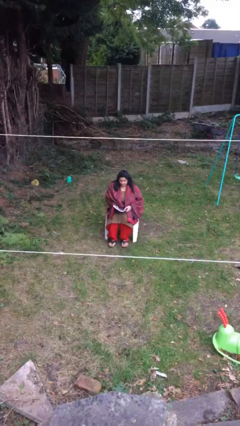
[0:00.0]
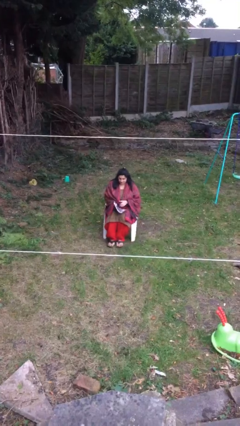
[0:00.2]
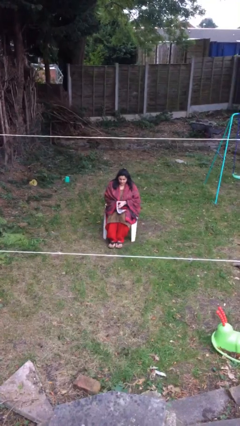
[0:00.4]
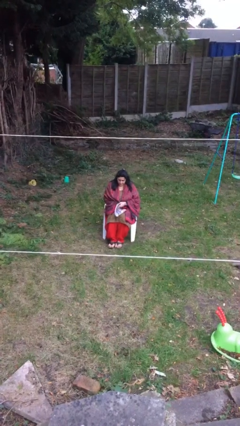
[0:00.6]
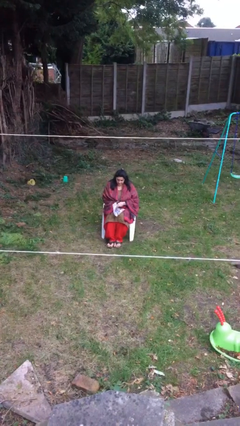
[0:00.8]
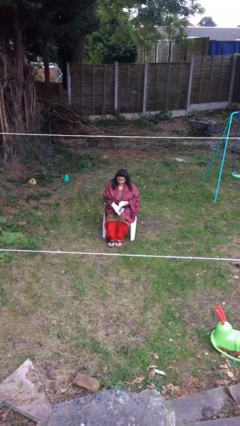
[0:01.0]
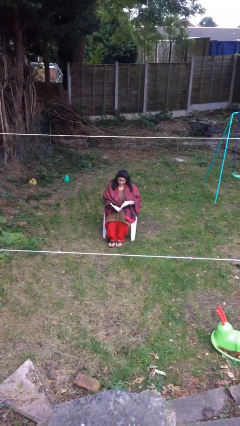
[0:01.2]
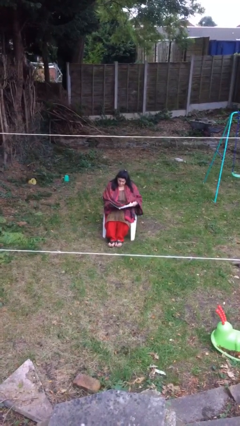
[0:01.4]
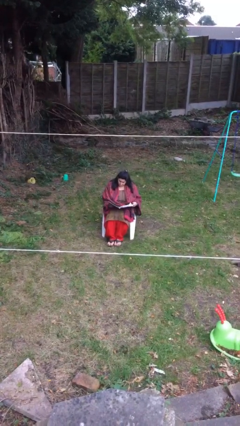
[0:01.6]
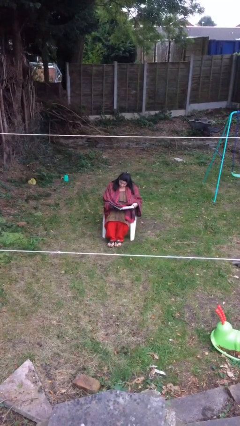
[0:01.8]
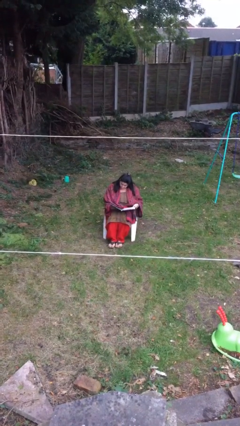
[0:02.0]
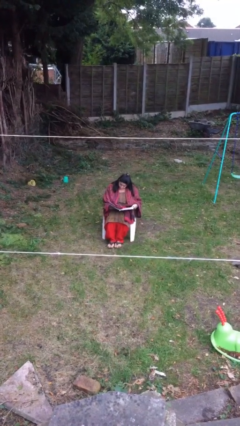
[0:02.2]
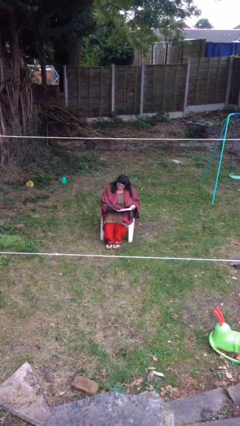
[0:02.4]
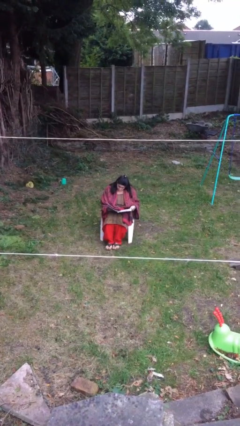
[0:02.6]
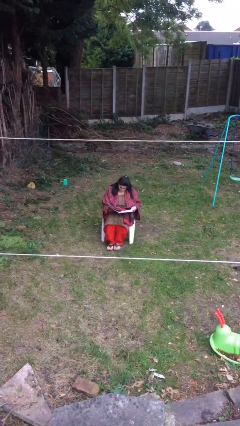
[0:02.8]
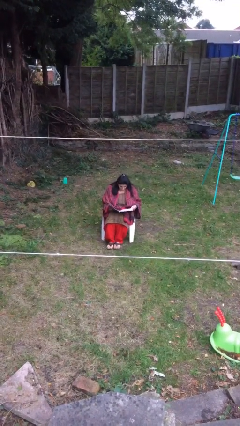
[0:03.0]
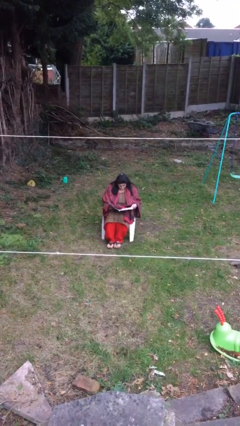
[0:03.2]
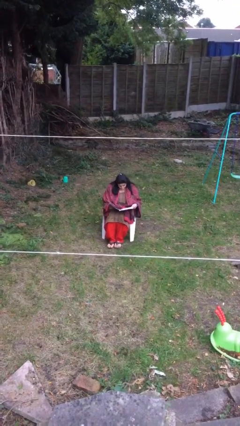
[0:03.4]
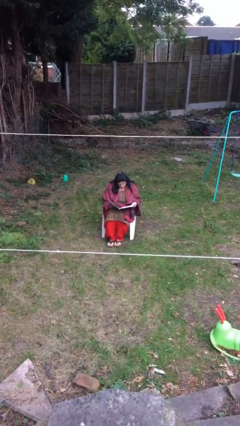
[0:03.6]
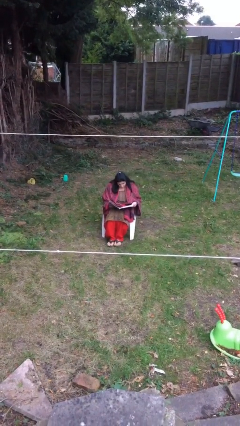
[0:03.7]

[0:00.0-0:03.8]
person reads document

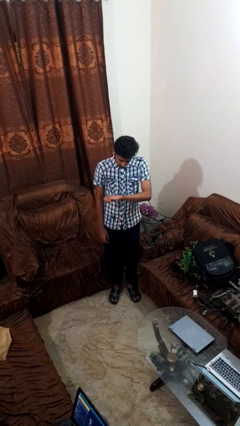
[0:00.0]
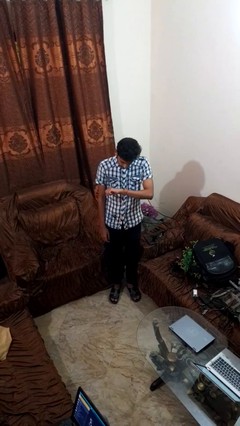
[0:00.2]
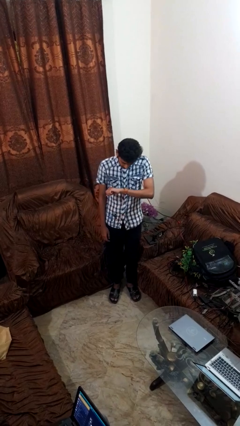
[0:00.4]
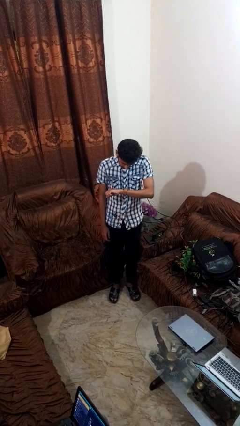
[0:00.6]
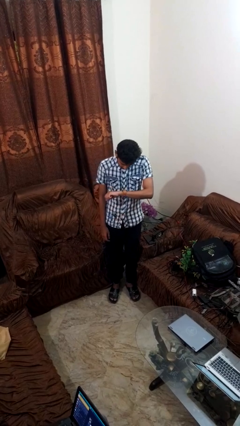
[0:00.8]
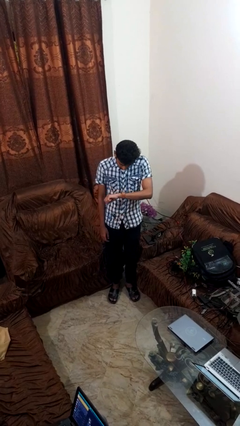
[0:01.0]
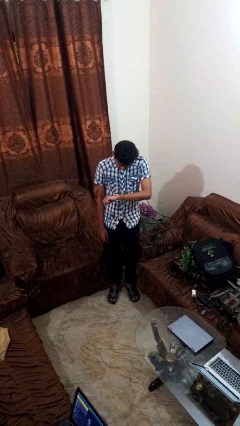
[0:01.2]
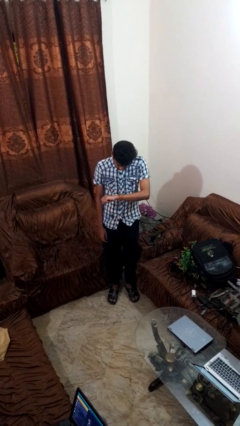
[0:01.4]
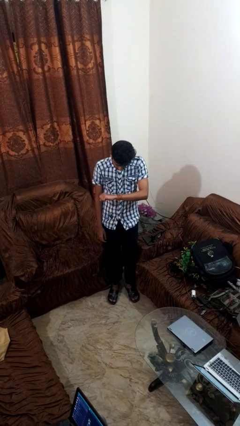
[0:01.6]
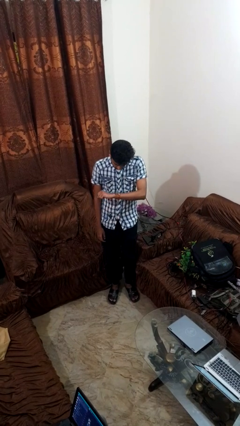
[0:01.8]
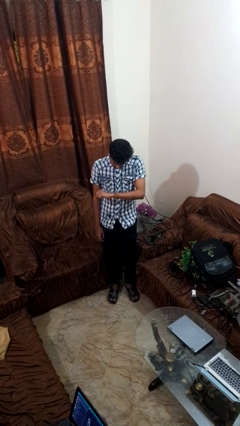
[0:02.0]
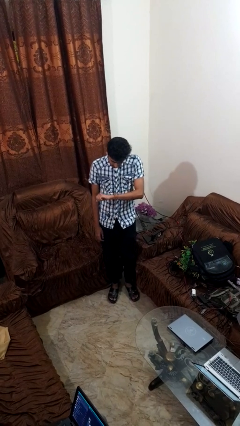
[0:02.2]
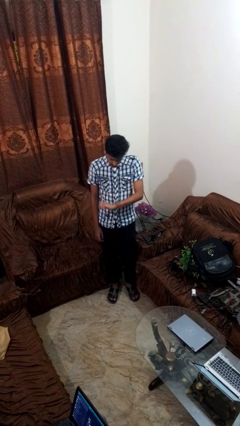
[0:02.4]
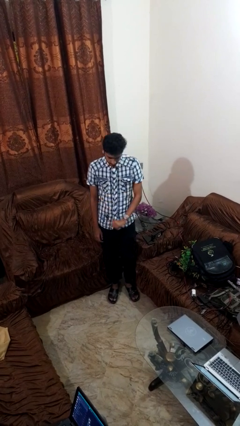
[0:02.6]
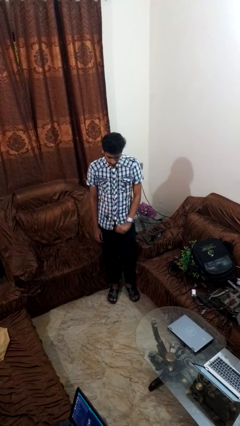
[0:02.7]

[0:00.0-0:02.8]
person looks at wristwatch

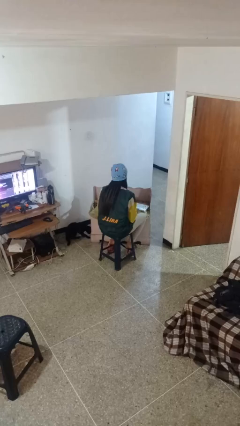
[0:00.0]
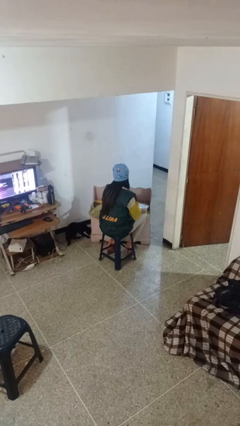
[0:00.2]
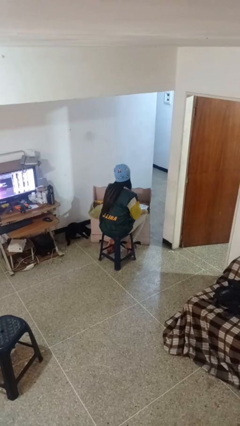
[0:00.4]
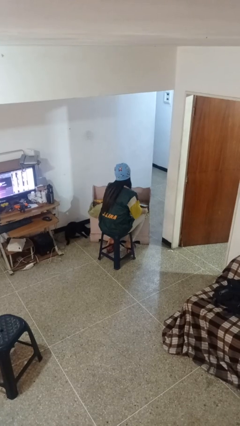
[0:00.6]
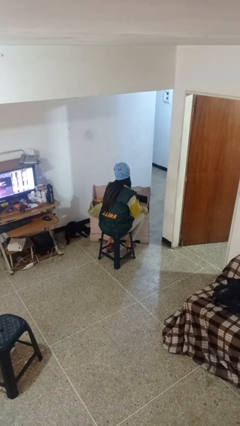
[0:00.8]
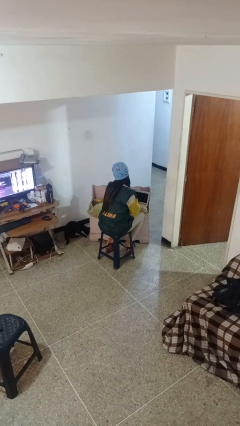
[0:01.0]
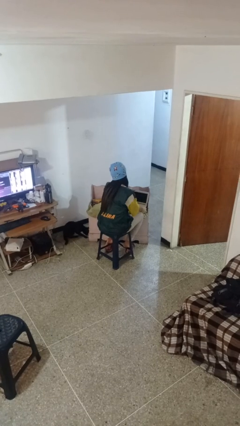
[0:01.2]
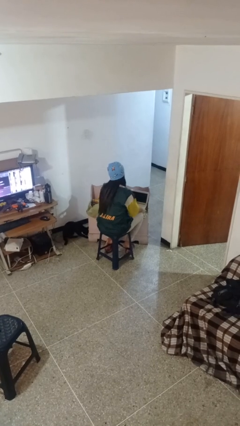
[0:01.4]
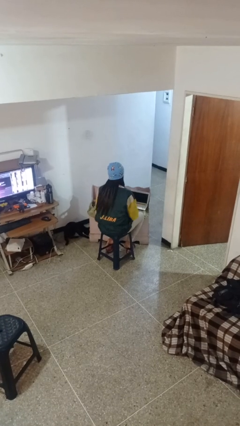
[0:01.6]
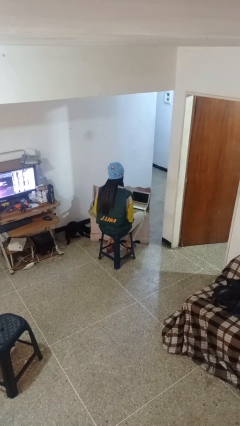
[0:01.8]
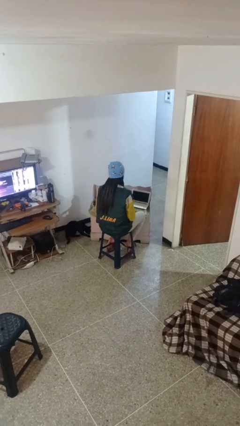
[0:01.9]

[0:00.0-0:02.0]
person opens laptop

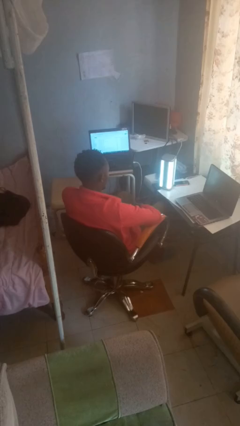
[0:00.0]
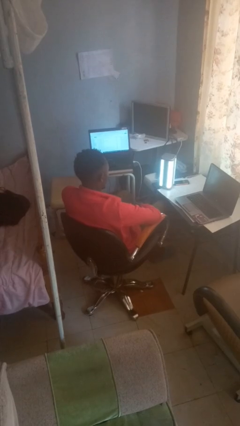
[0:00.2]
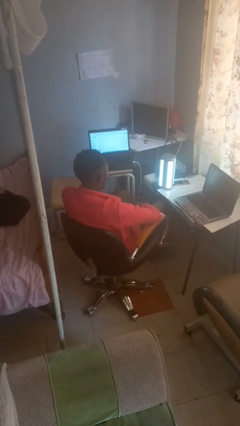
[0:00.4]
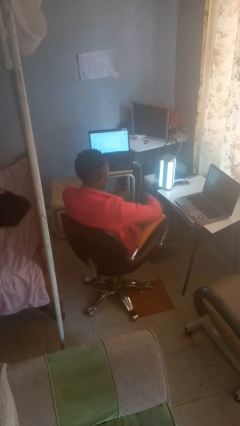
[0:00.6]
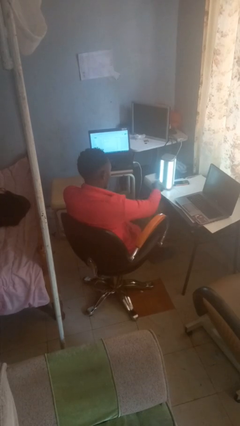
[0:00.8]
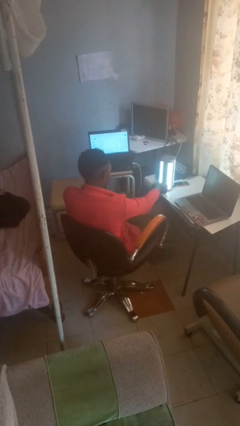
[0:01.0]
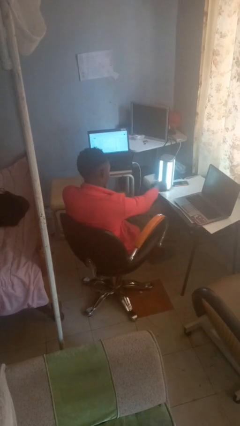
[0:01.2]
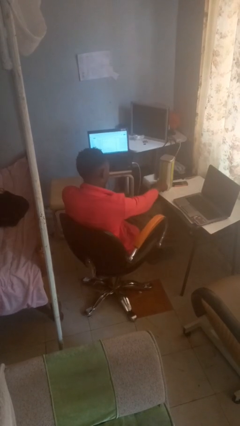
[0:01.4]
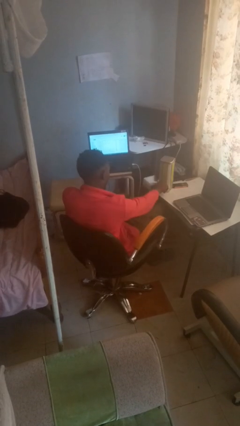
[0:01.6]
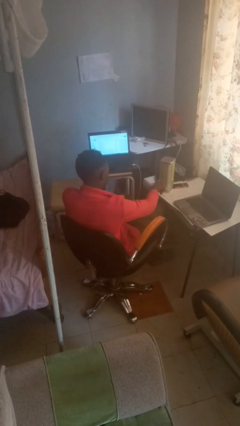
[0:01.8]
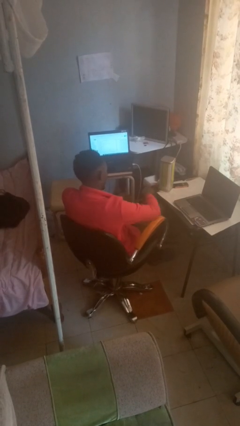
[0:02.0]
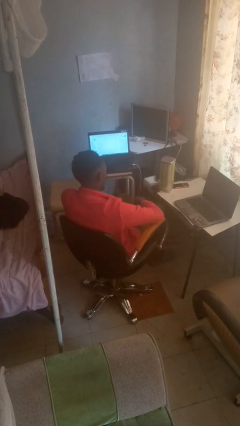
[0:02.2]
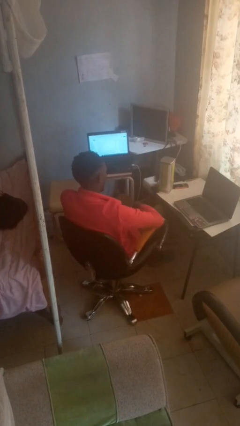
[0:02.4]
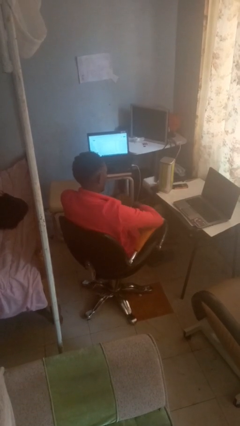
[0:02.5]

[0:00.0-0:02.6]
person turns off lamp

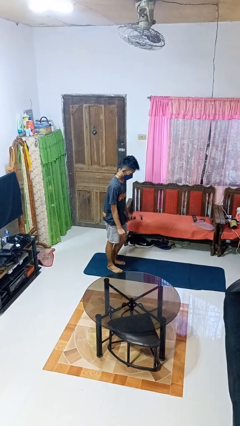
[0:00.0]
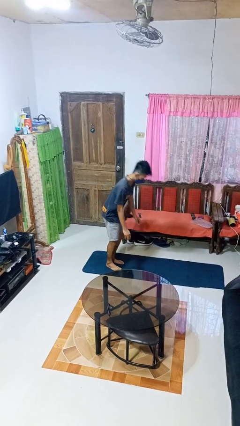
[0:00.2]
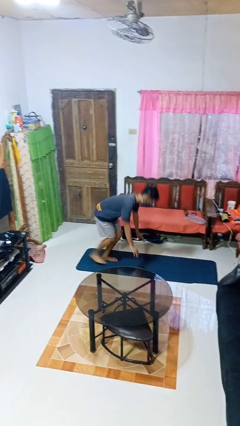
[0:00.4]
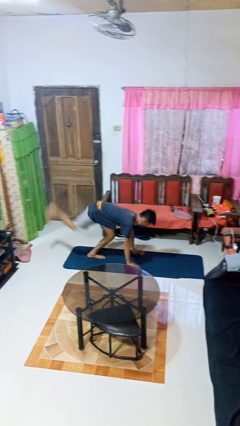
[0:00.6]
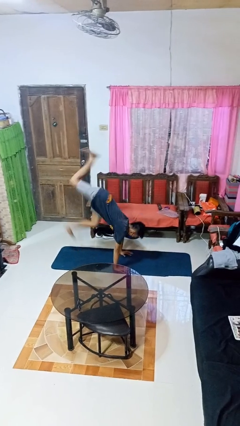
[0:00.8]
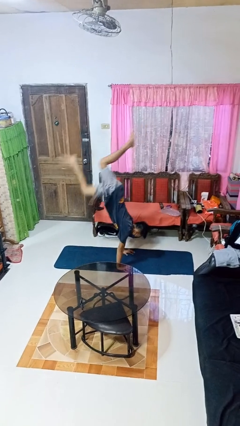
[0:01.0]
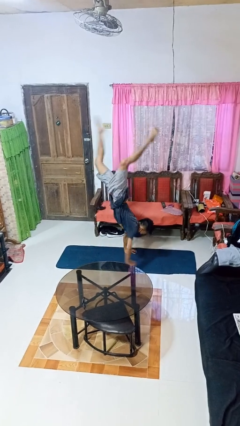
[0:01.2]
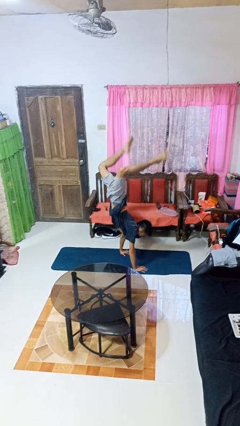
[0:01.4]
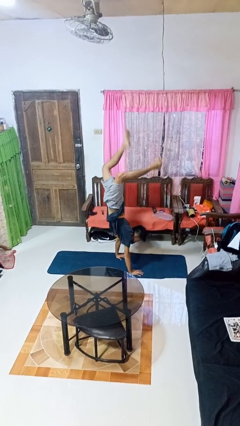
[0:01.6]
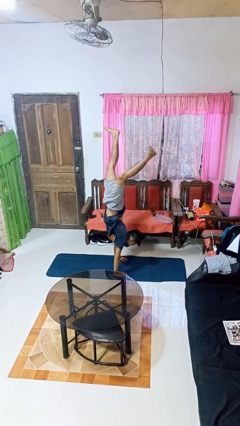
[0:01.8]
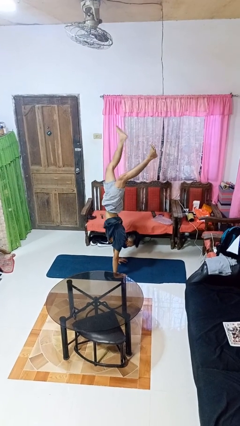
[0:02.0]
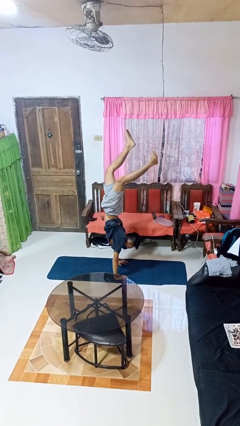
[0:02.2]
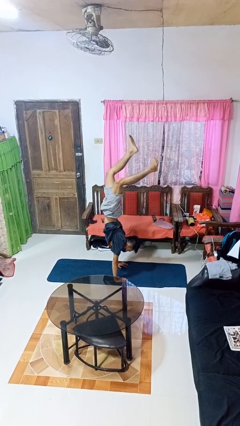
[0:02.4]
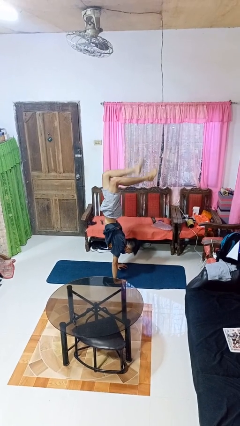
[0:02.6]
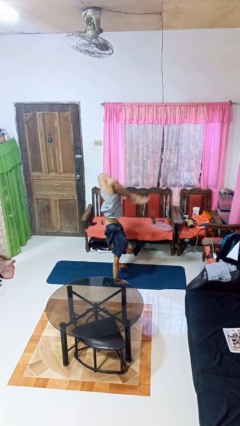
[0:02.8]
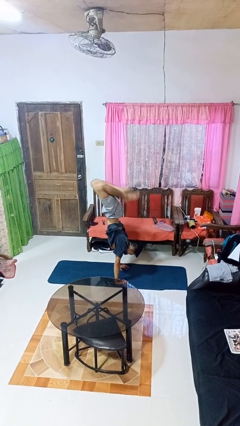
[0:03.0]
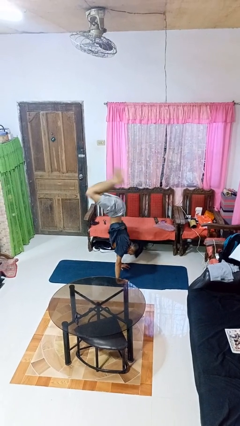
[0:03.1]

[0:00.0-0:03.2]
person handstand

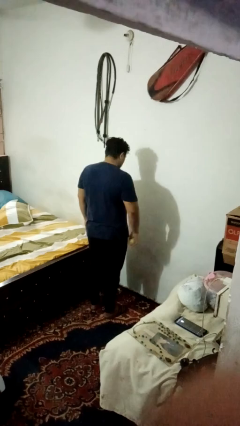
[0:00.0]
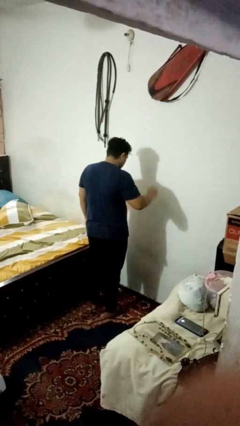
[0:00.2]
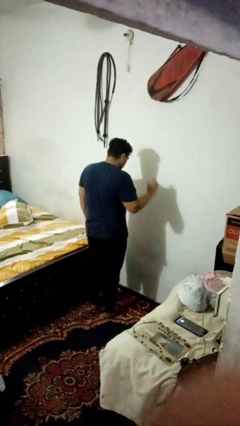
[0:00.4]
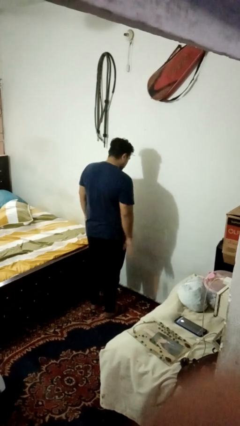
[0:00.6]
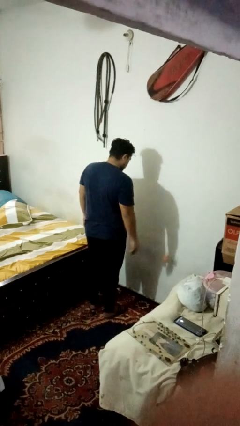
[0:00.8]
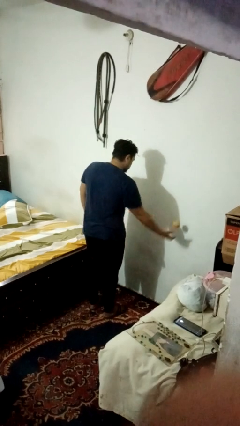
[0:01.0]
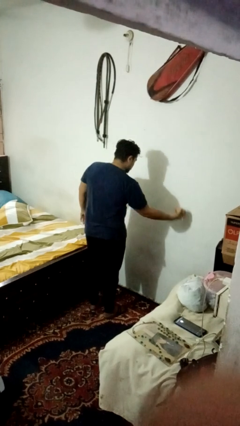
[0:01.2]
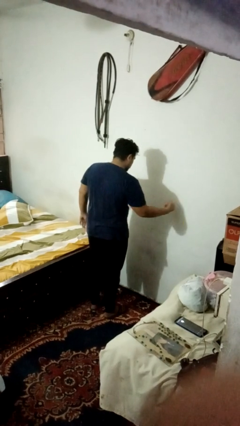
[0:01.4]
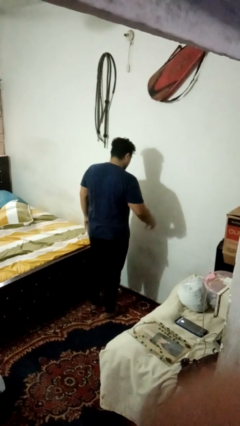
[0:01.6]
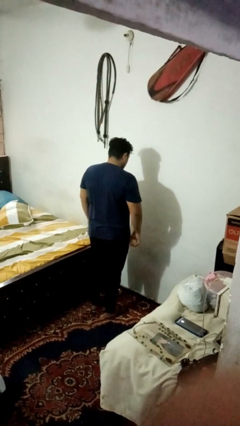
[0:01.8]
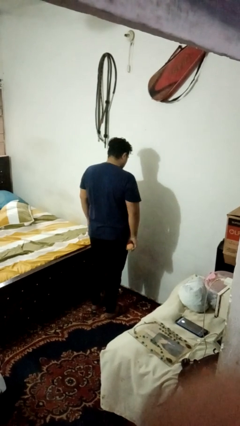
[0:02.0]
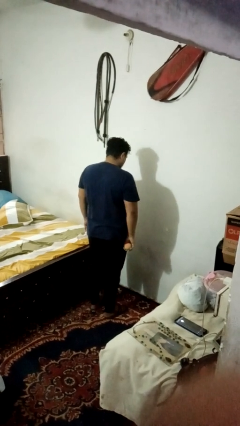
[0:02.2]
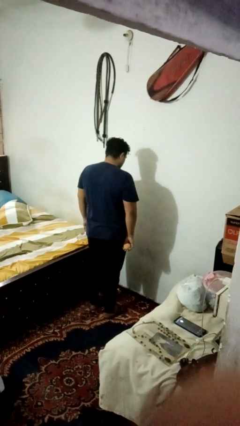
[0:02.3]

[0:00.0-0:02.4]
person bounces ball on floor

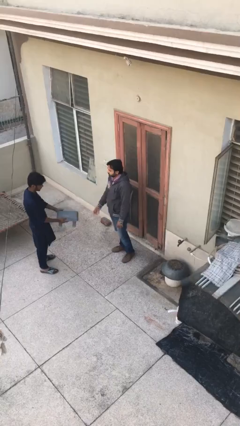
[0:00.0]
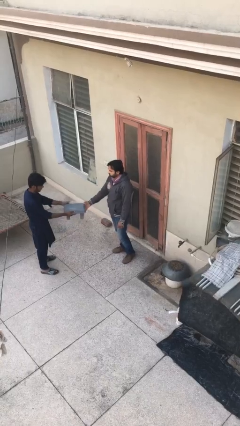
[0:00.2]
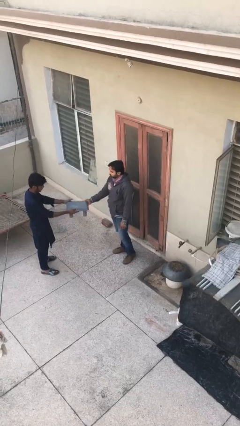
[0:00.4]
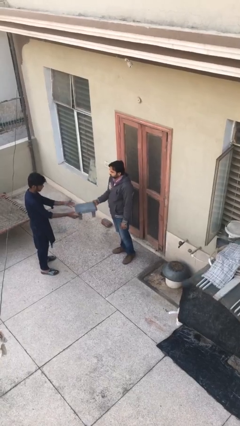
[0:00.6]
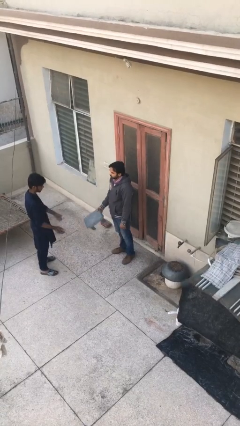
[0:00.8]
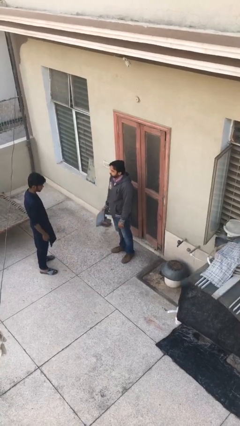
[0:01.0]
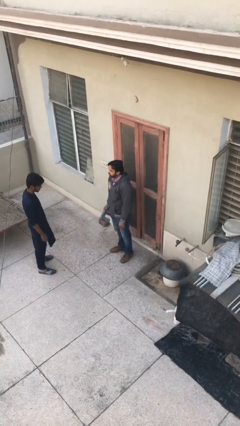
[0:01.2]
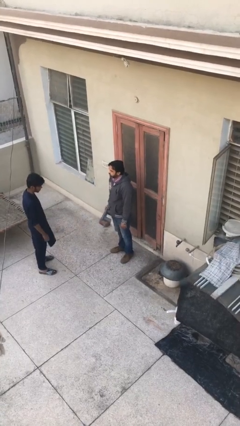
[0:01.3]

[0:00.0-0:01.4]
person transfers object to person
